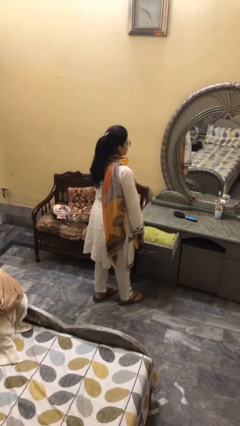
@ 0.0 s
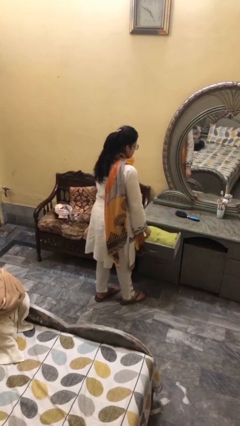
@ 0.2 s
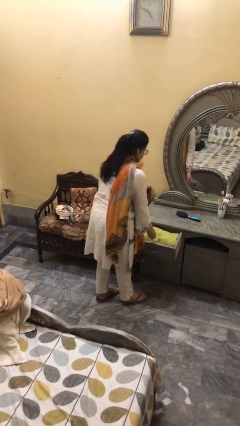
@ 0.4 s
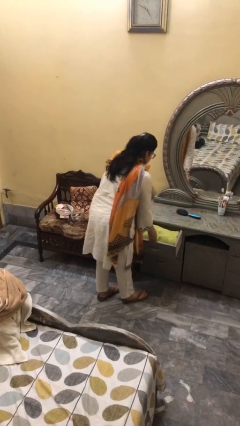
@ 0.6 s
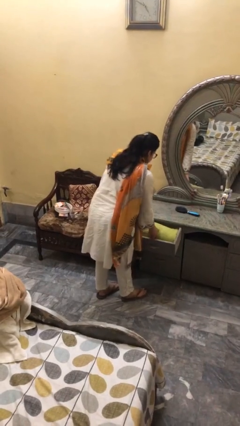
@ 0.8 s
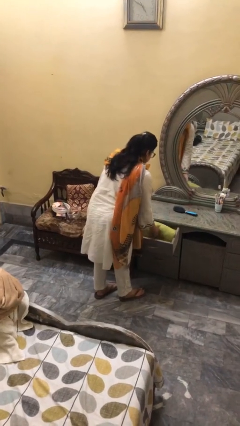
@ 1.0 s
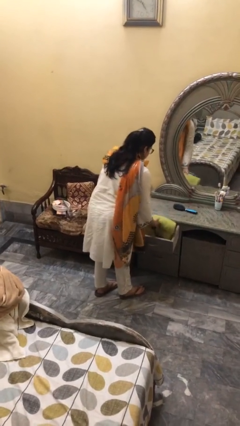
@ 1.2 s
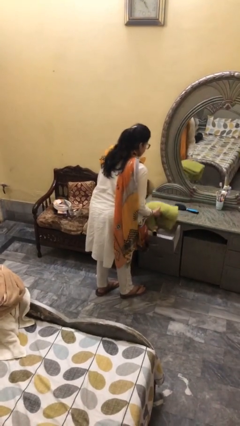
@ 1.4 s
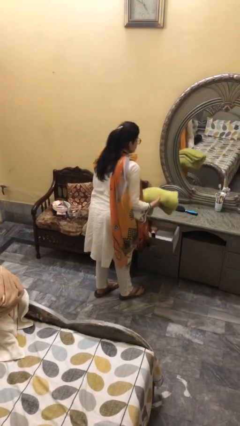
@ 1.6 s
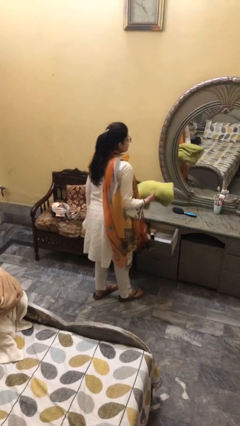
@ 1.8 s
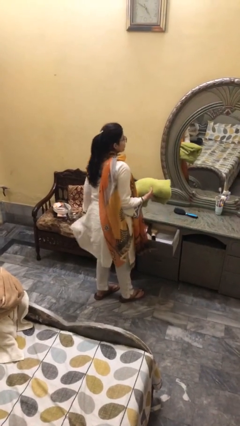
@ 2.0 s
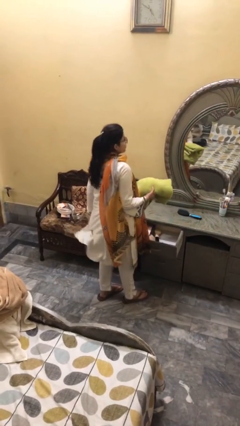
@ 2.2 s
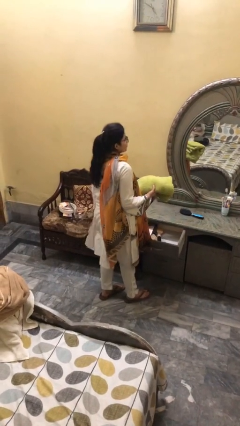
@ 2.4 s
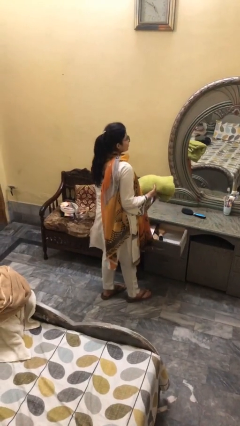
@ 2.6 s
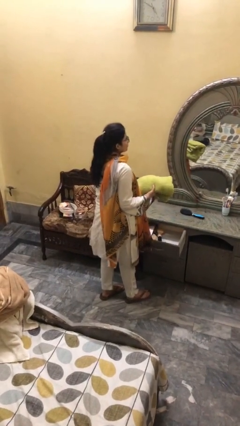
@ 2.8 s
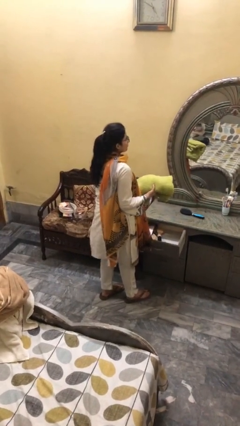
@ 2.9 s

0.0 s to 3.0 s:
person takes clothes from dresser

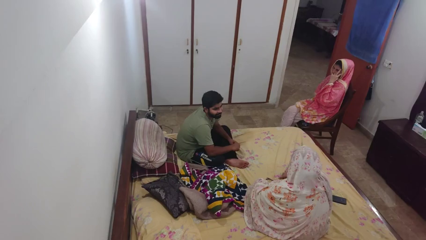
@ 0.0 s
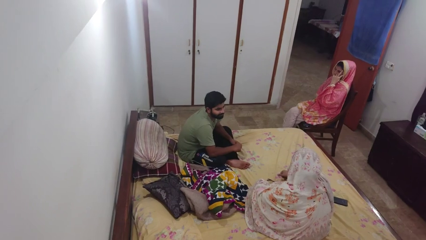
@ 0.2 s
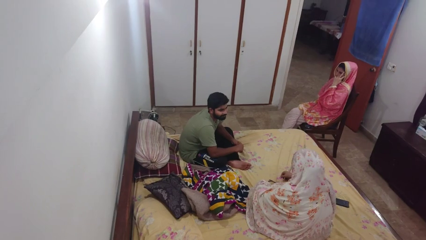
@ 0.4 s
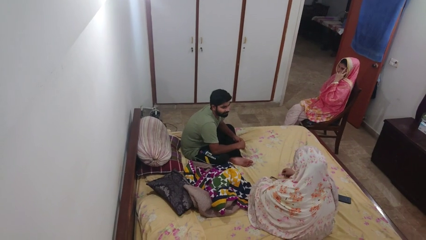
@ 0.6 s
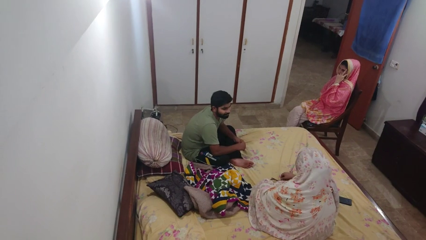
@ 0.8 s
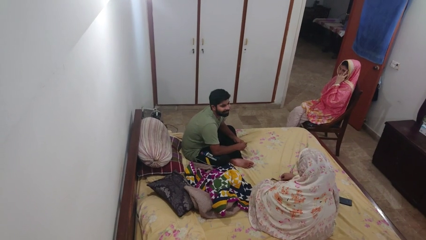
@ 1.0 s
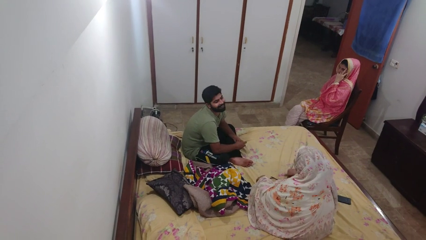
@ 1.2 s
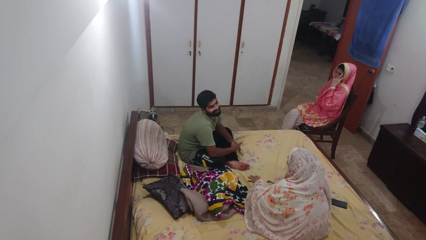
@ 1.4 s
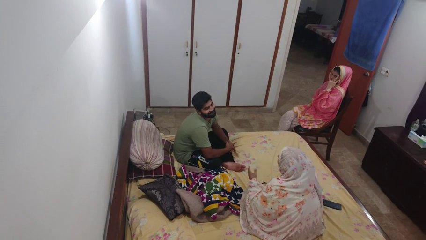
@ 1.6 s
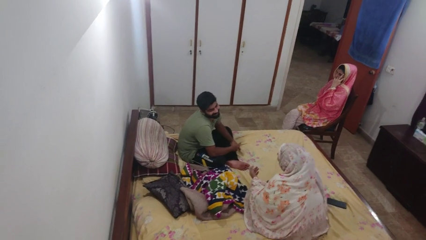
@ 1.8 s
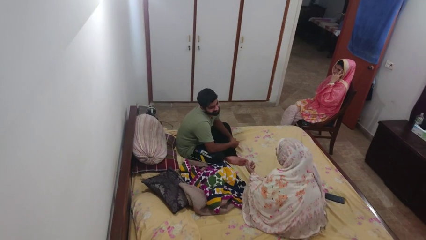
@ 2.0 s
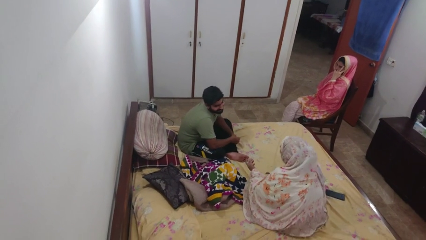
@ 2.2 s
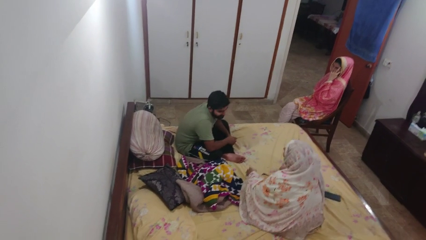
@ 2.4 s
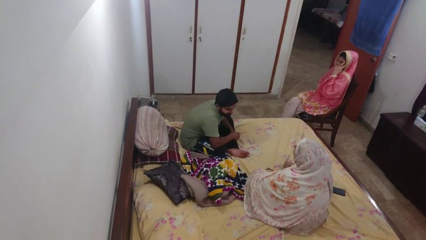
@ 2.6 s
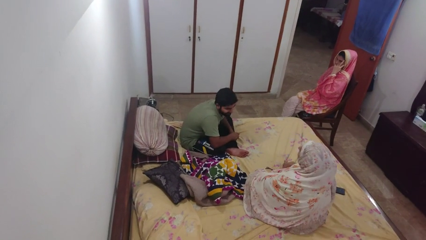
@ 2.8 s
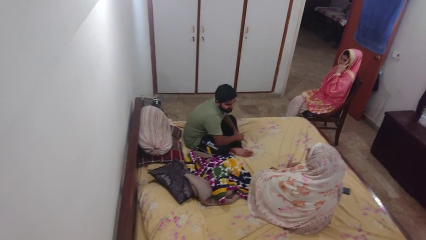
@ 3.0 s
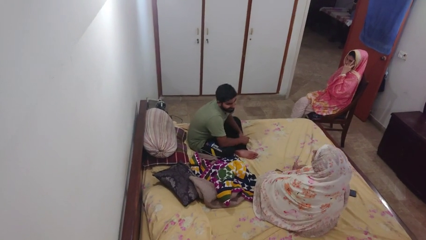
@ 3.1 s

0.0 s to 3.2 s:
person laughs with person

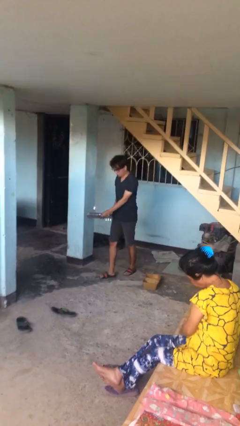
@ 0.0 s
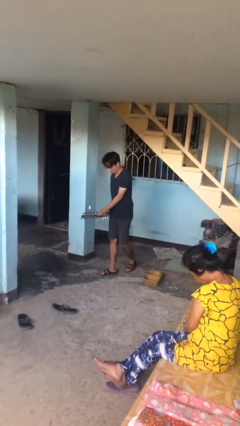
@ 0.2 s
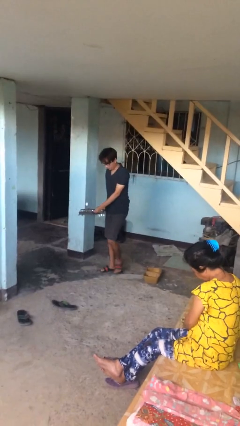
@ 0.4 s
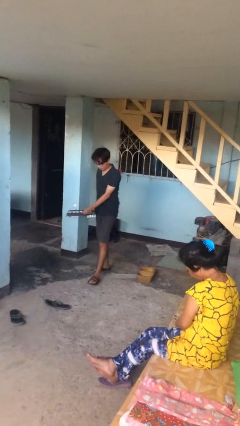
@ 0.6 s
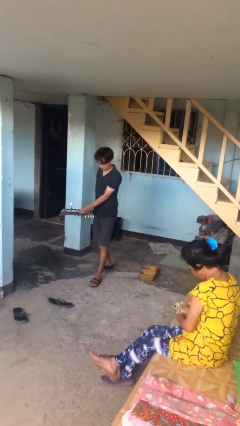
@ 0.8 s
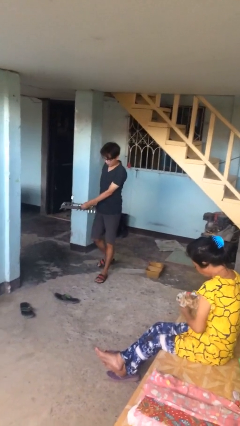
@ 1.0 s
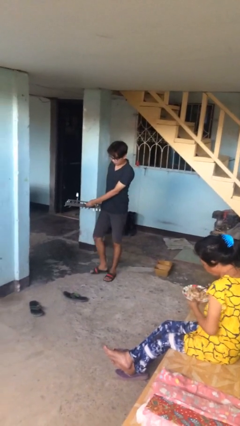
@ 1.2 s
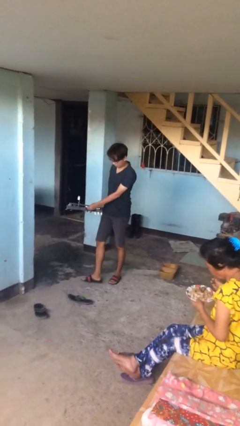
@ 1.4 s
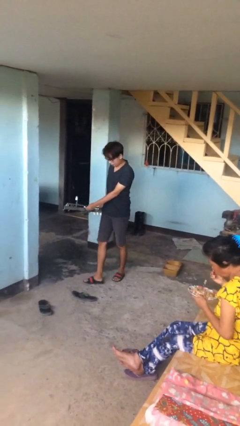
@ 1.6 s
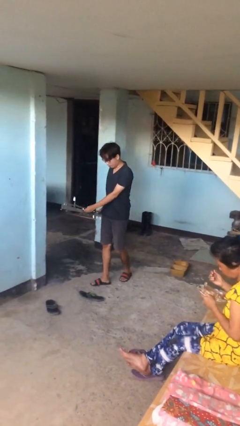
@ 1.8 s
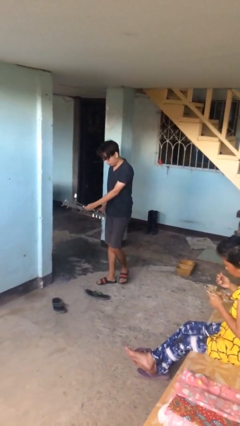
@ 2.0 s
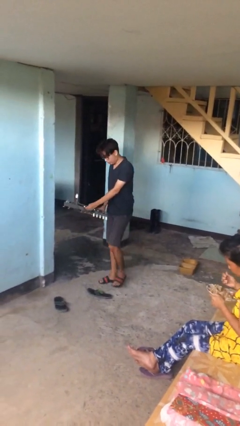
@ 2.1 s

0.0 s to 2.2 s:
person carries heavy object

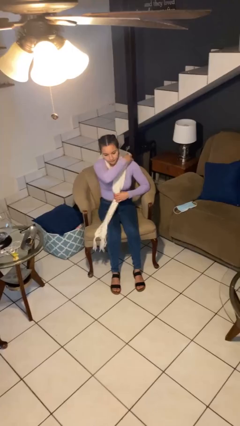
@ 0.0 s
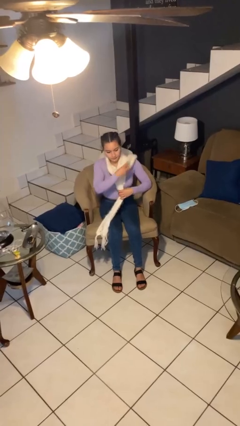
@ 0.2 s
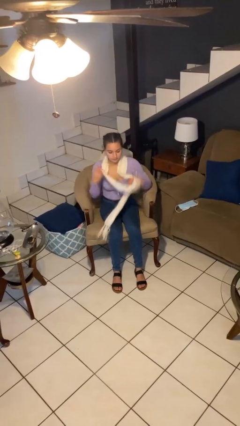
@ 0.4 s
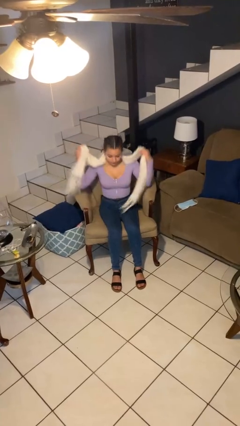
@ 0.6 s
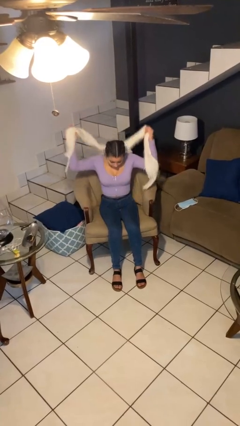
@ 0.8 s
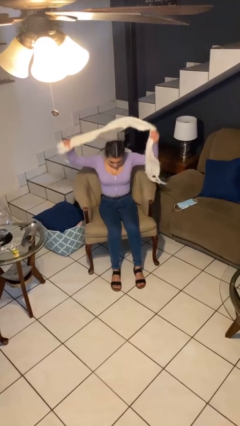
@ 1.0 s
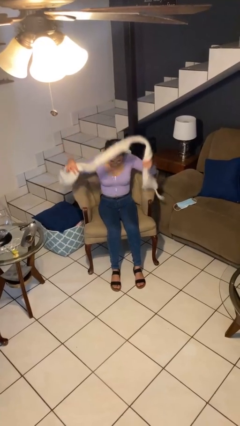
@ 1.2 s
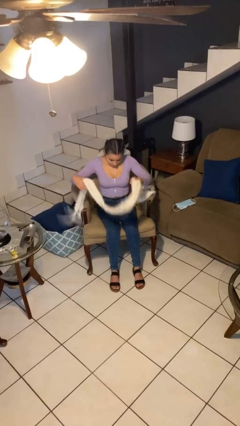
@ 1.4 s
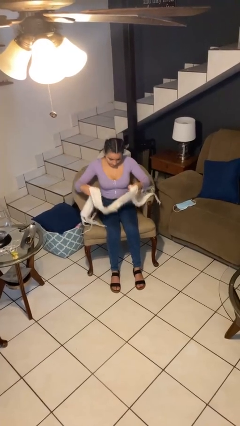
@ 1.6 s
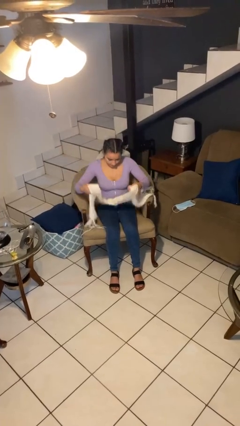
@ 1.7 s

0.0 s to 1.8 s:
person takes off scarf

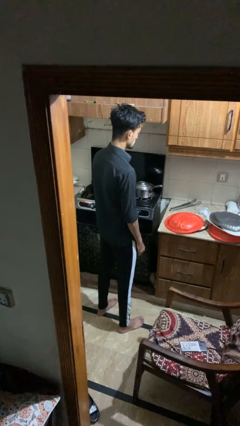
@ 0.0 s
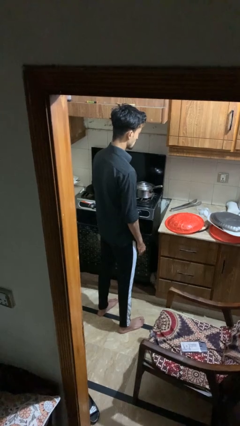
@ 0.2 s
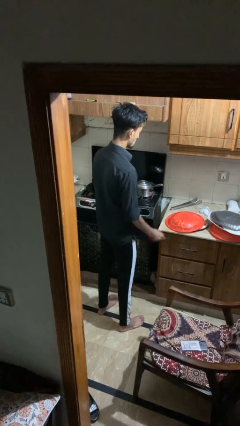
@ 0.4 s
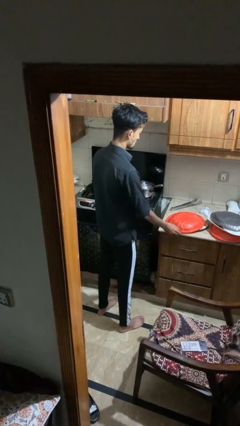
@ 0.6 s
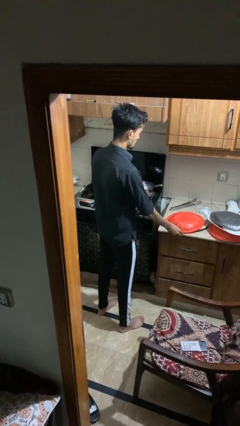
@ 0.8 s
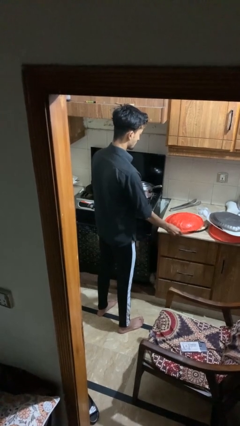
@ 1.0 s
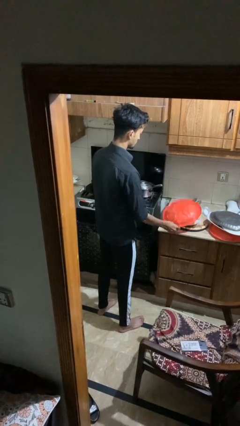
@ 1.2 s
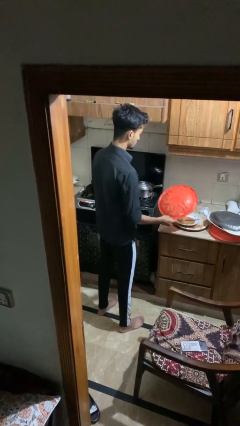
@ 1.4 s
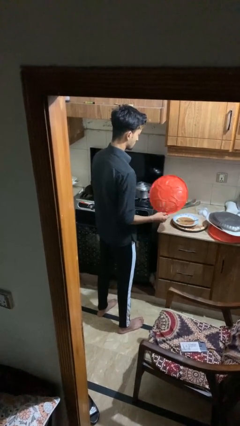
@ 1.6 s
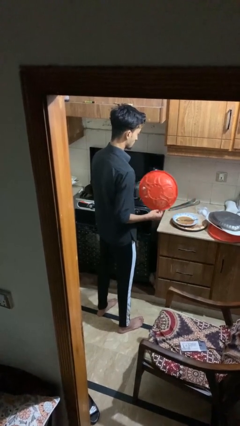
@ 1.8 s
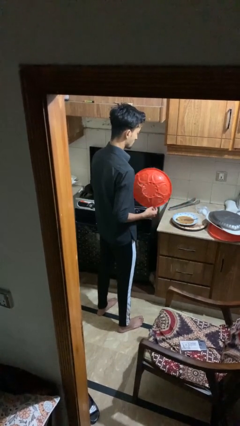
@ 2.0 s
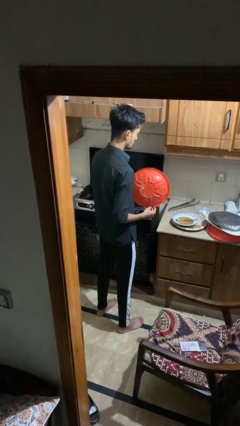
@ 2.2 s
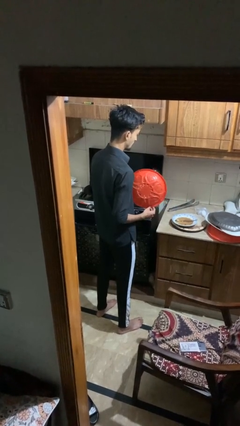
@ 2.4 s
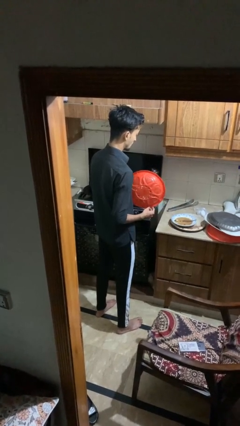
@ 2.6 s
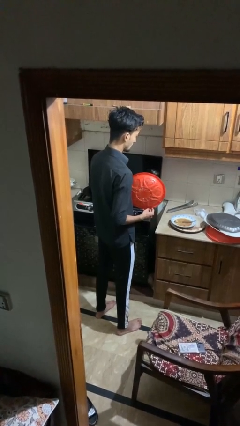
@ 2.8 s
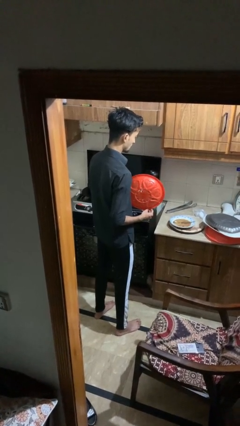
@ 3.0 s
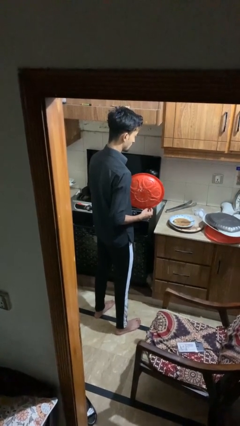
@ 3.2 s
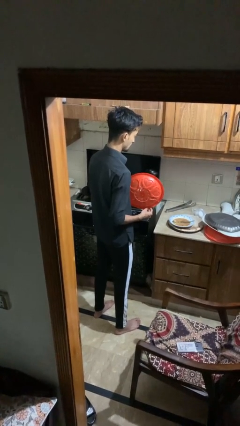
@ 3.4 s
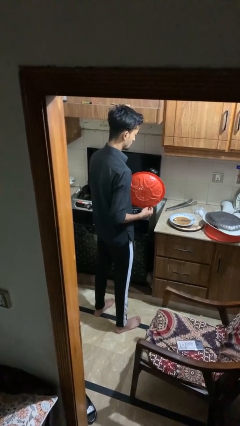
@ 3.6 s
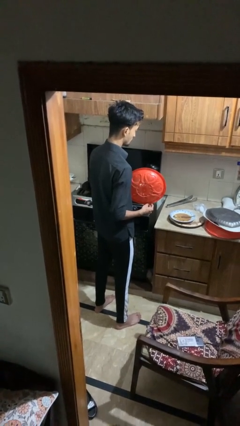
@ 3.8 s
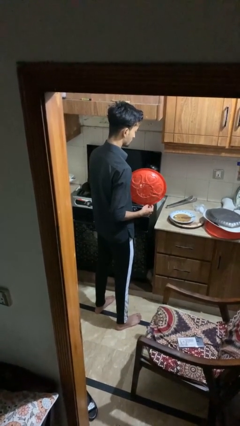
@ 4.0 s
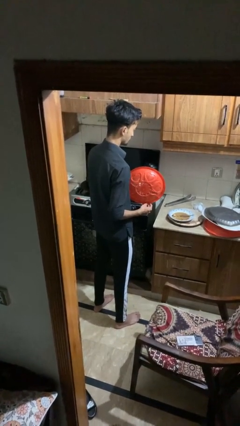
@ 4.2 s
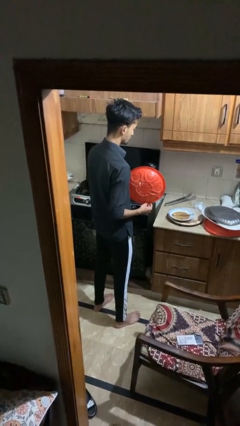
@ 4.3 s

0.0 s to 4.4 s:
person picks up object from shelf

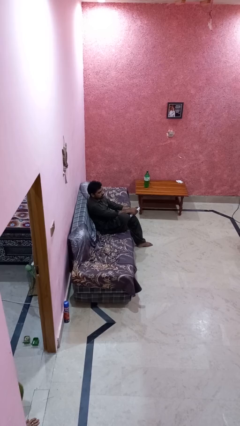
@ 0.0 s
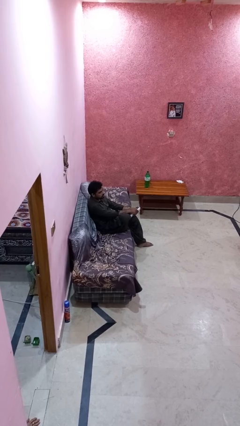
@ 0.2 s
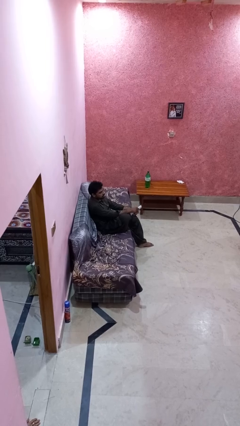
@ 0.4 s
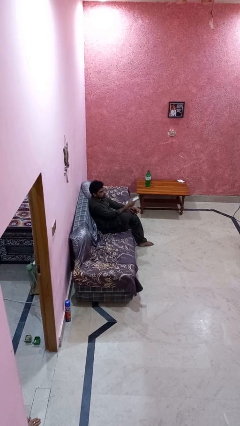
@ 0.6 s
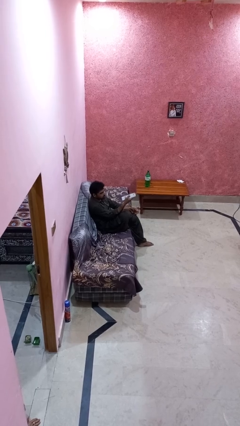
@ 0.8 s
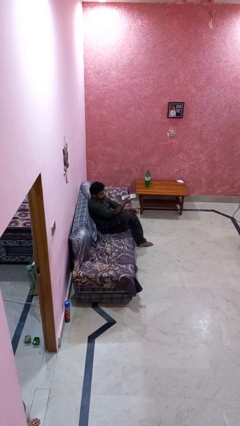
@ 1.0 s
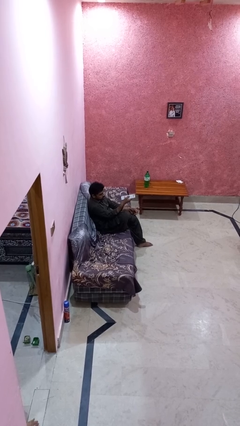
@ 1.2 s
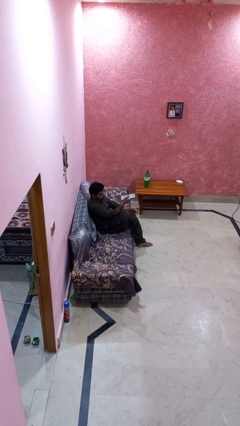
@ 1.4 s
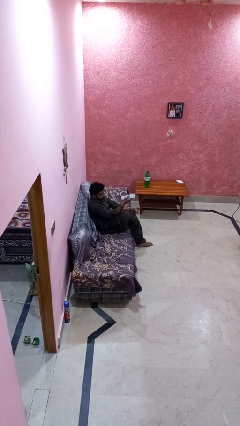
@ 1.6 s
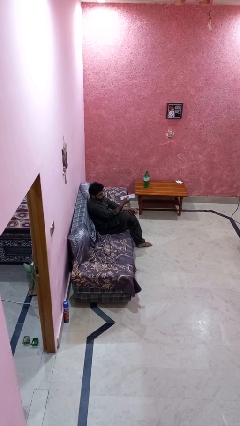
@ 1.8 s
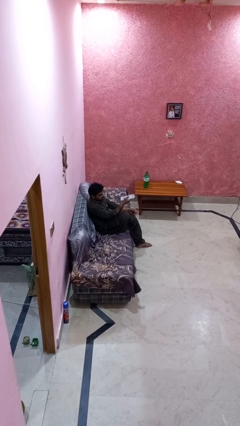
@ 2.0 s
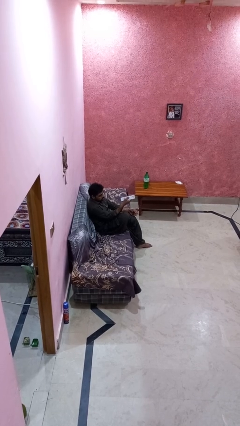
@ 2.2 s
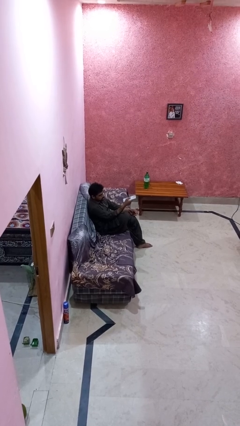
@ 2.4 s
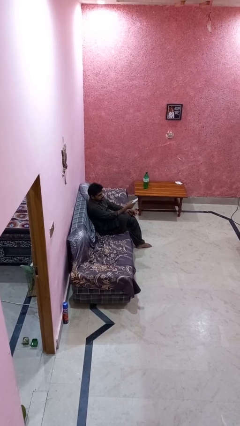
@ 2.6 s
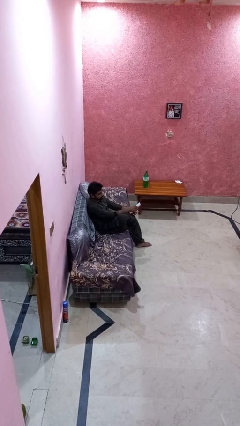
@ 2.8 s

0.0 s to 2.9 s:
person uses television remote
